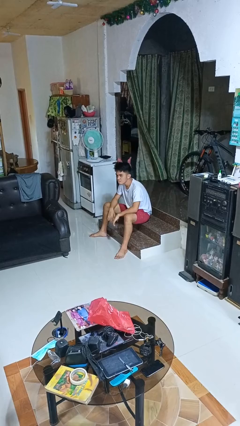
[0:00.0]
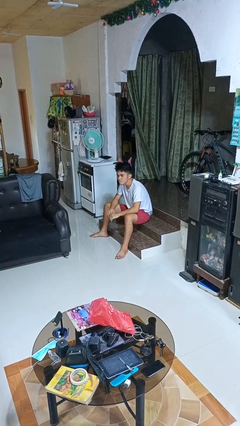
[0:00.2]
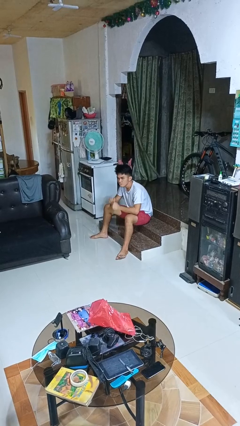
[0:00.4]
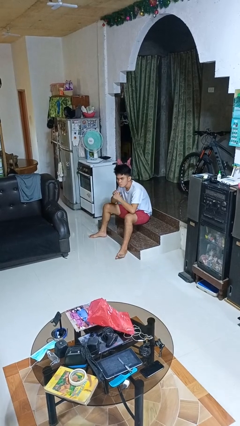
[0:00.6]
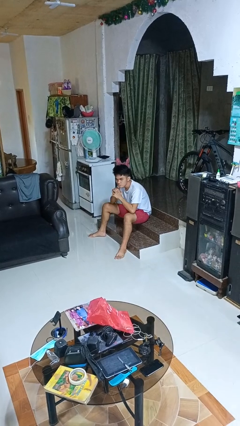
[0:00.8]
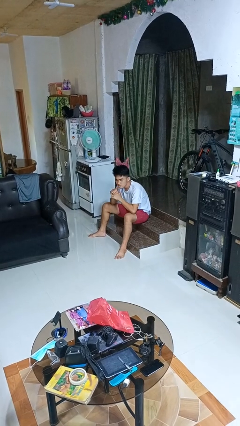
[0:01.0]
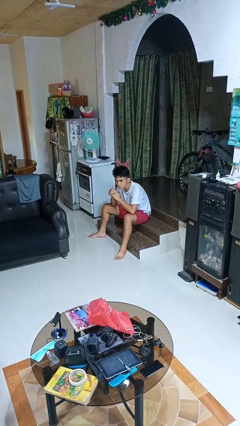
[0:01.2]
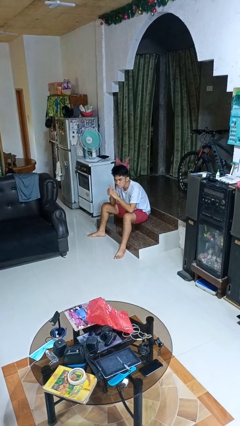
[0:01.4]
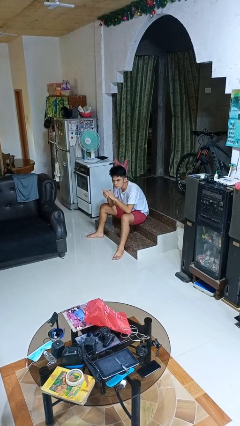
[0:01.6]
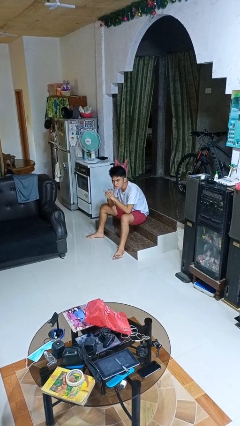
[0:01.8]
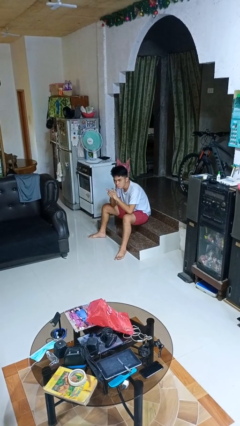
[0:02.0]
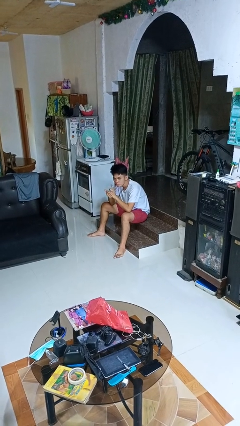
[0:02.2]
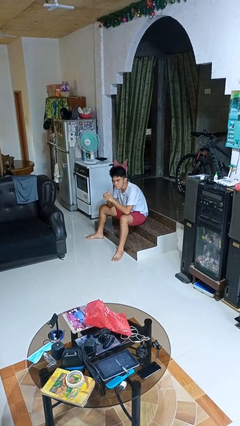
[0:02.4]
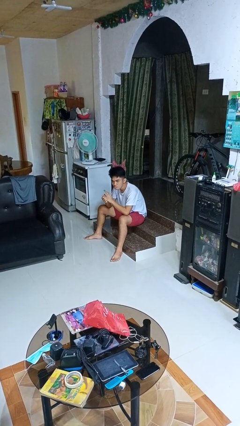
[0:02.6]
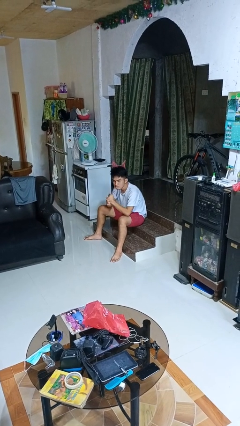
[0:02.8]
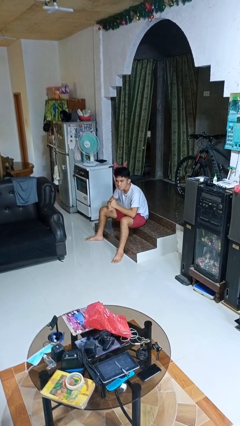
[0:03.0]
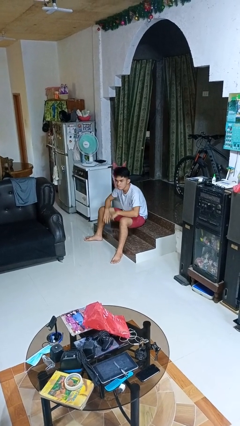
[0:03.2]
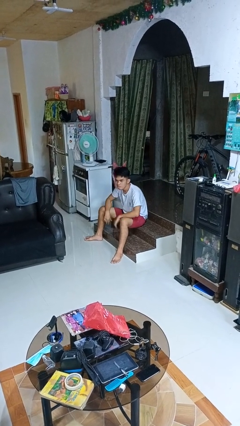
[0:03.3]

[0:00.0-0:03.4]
person cracks knuckles

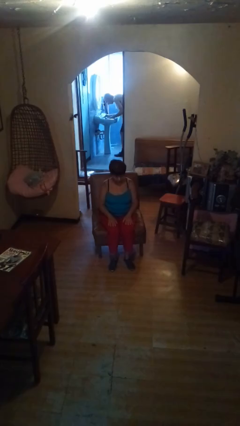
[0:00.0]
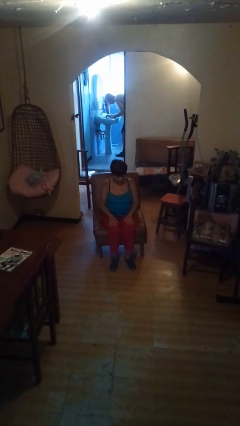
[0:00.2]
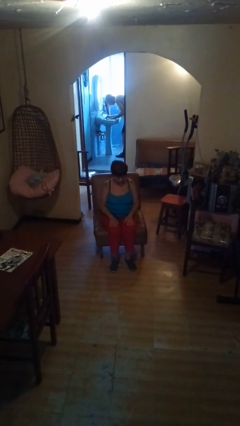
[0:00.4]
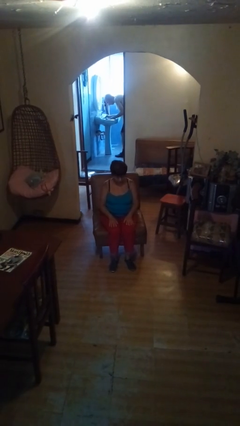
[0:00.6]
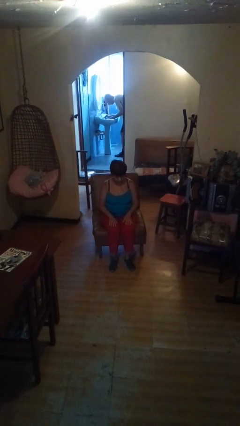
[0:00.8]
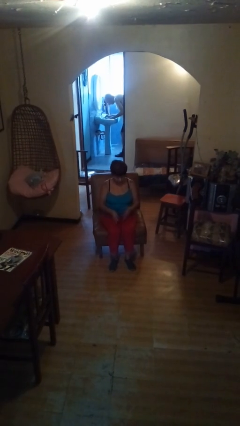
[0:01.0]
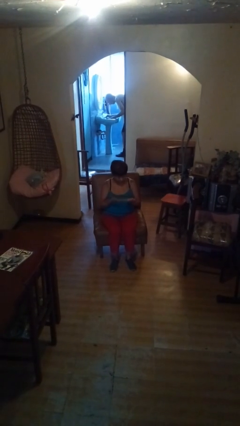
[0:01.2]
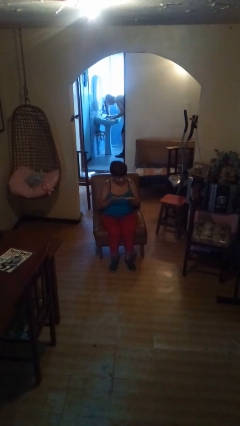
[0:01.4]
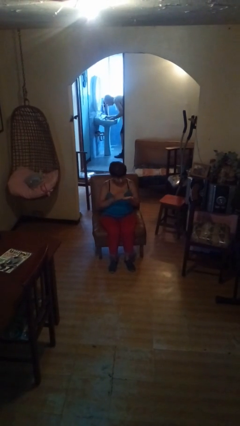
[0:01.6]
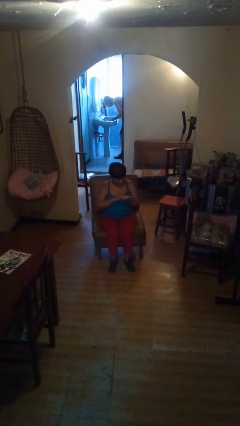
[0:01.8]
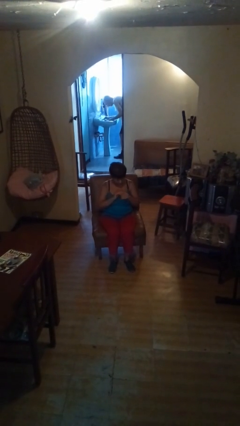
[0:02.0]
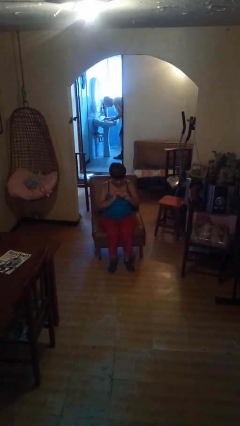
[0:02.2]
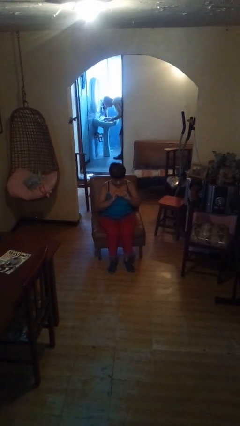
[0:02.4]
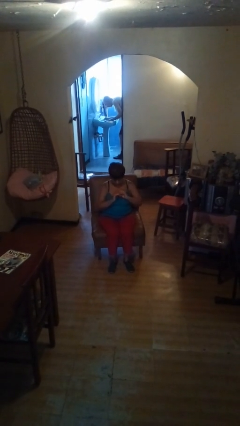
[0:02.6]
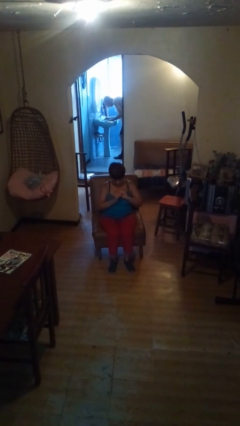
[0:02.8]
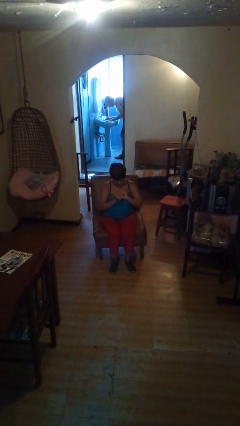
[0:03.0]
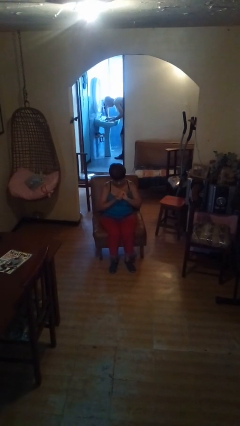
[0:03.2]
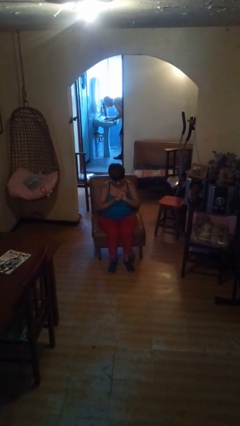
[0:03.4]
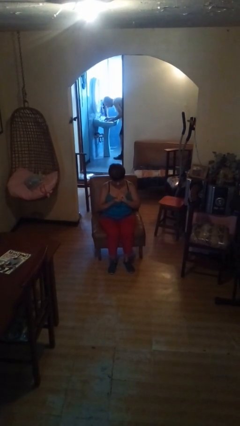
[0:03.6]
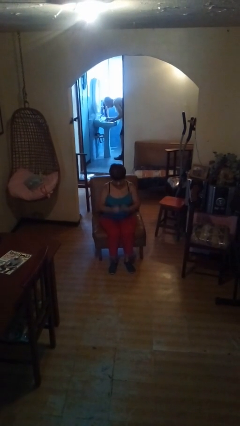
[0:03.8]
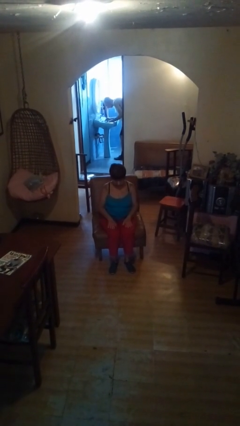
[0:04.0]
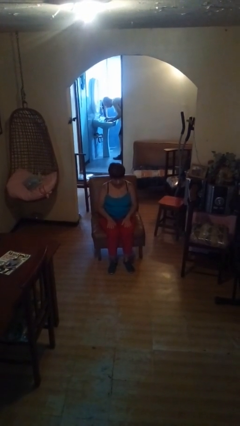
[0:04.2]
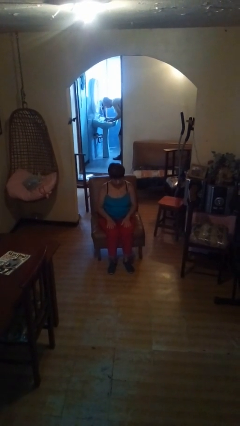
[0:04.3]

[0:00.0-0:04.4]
person looks at hands in lap

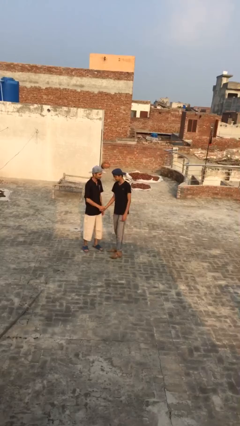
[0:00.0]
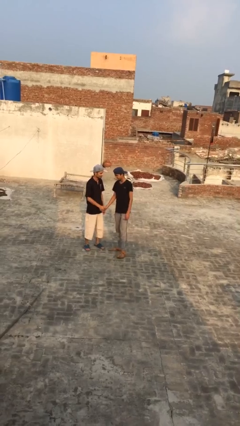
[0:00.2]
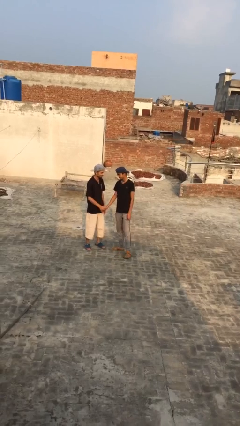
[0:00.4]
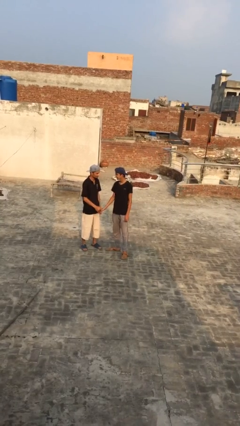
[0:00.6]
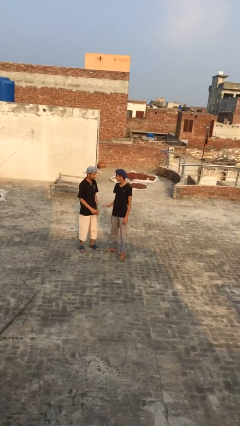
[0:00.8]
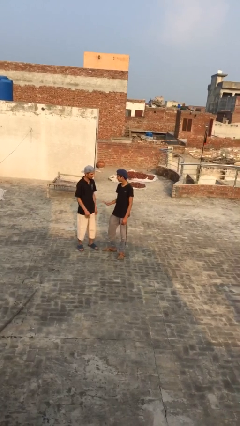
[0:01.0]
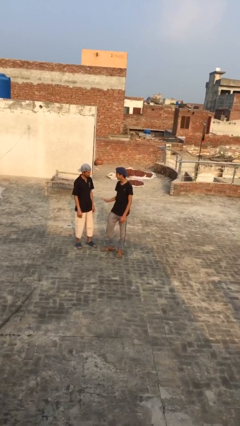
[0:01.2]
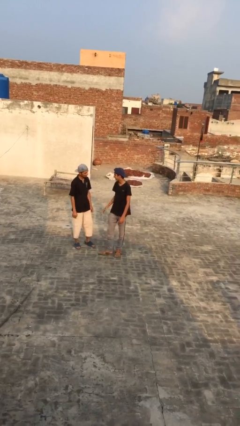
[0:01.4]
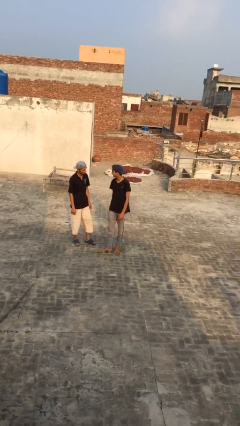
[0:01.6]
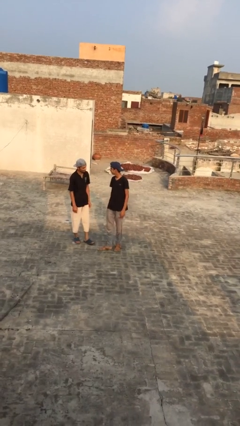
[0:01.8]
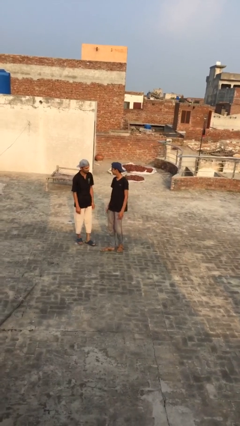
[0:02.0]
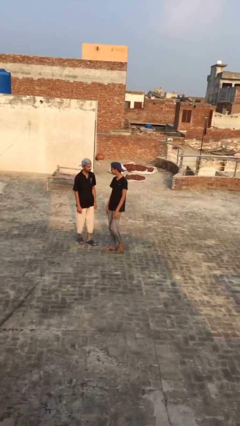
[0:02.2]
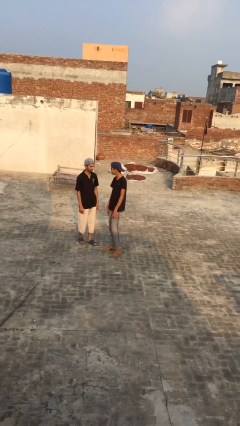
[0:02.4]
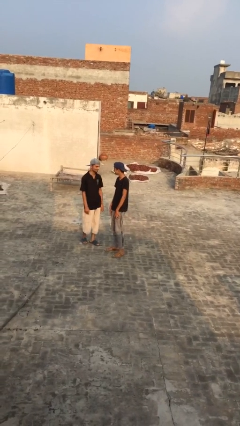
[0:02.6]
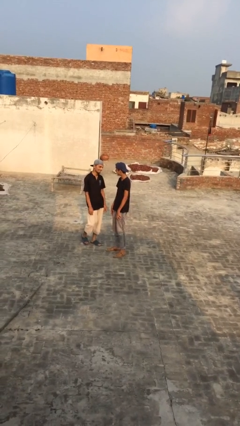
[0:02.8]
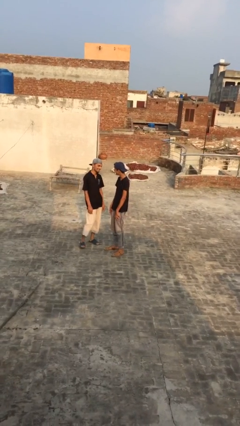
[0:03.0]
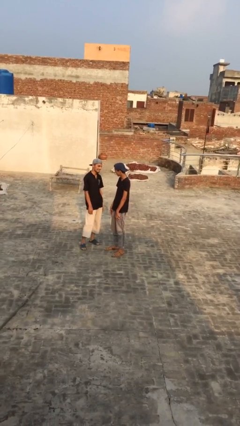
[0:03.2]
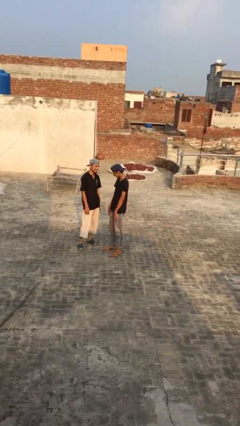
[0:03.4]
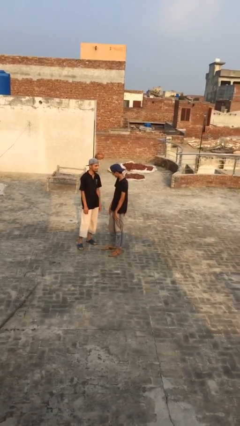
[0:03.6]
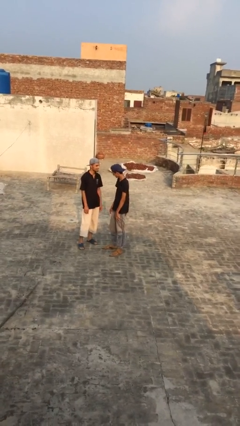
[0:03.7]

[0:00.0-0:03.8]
person talks to person

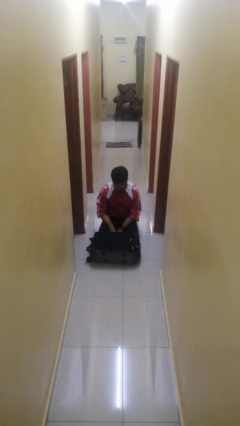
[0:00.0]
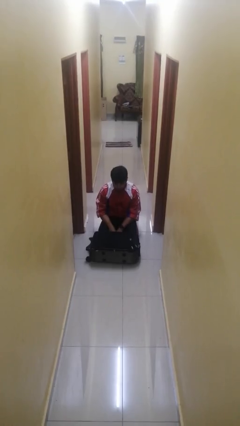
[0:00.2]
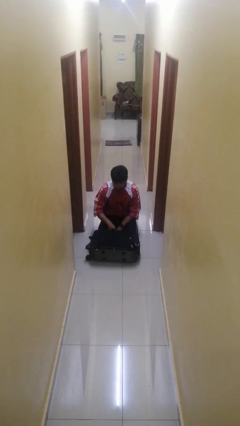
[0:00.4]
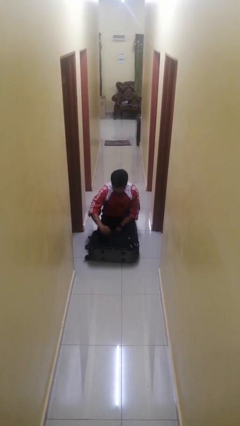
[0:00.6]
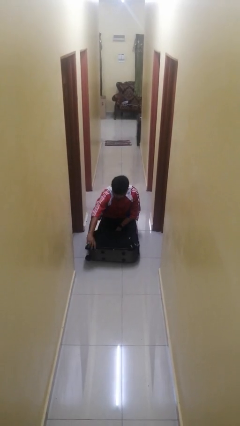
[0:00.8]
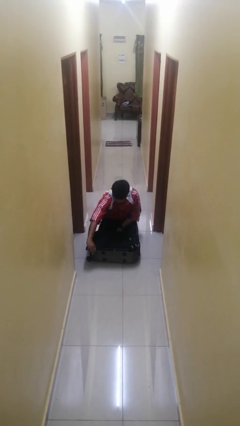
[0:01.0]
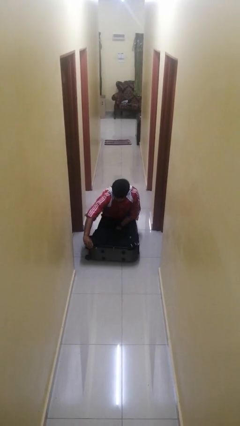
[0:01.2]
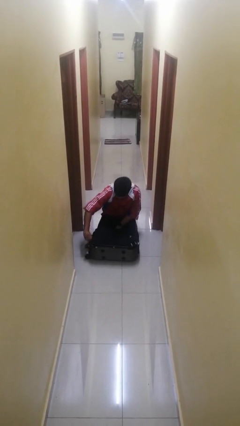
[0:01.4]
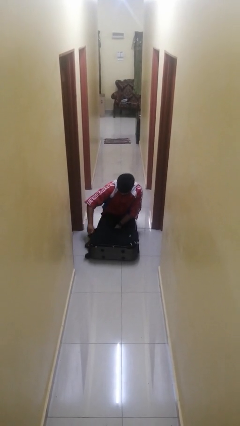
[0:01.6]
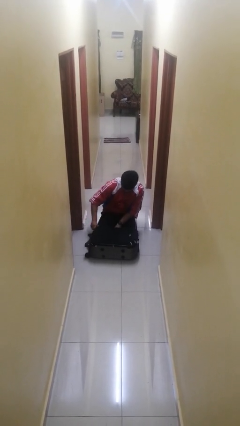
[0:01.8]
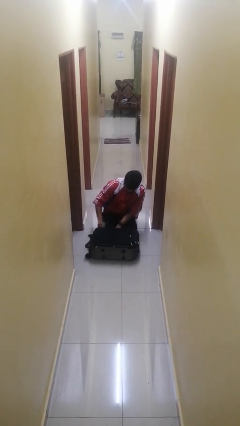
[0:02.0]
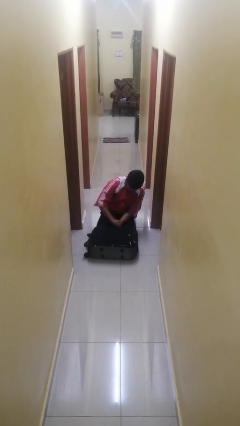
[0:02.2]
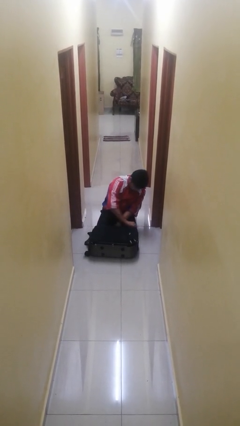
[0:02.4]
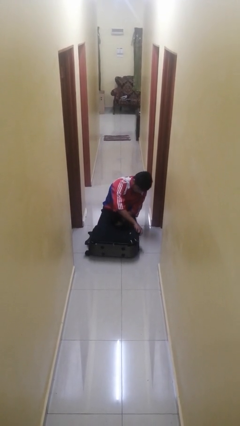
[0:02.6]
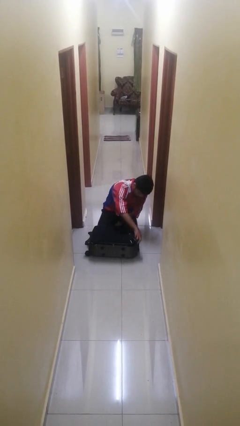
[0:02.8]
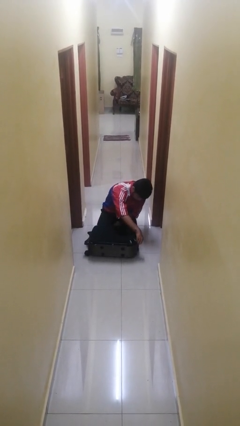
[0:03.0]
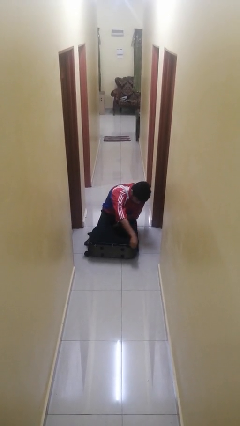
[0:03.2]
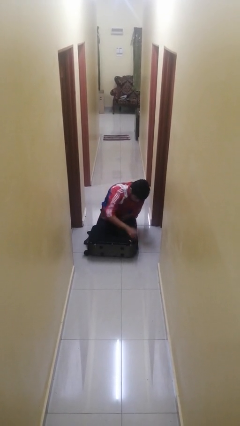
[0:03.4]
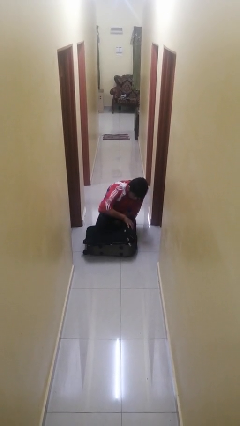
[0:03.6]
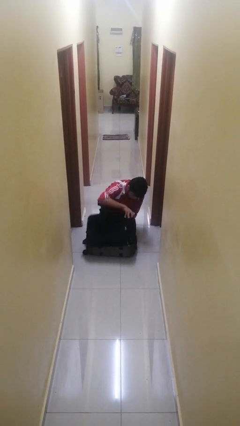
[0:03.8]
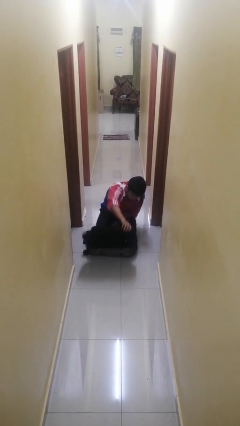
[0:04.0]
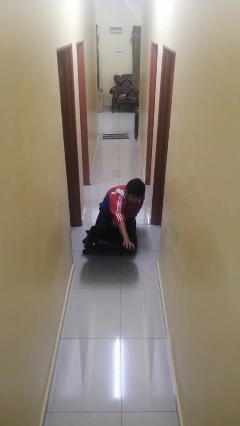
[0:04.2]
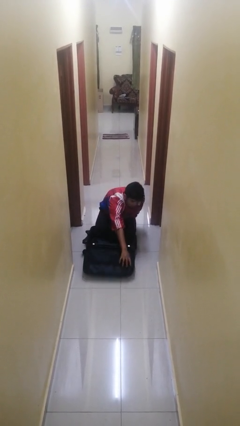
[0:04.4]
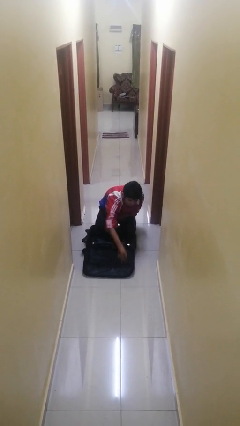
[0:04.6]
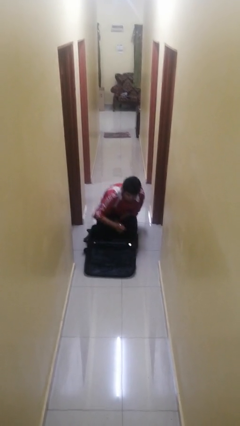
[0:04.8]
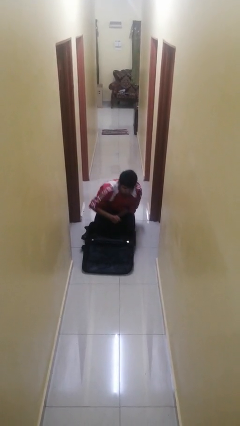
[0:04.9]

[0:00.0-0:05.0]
person opens suitcase

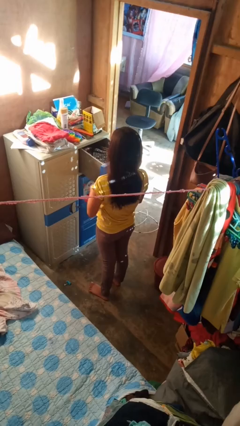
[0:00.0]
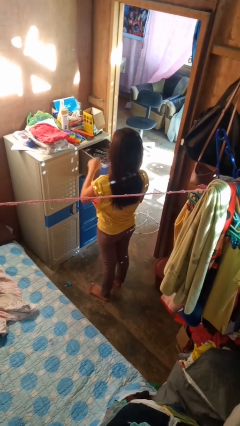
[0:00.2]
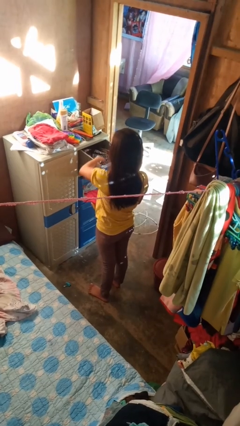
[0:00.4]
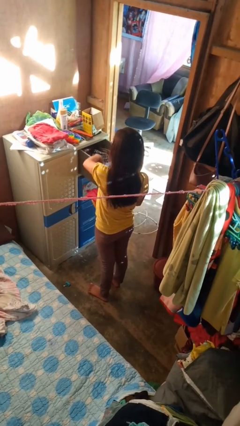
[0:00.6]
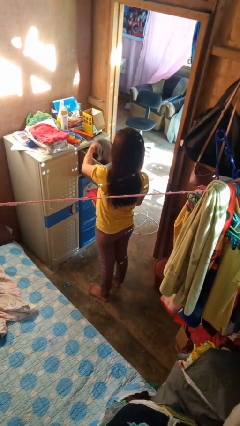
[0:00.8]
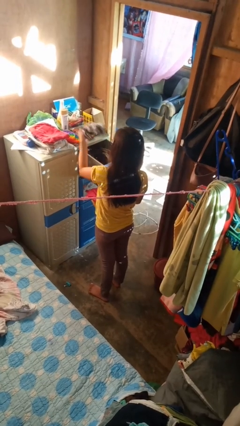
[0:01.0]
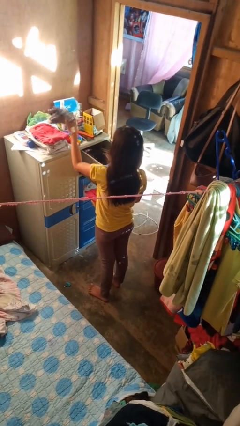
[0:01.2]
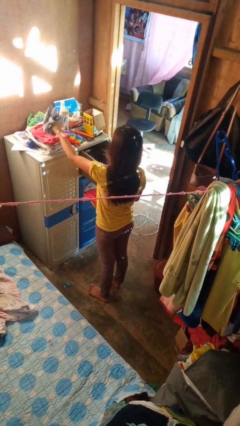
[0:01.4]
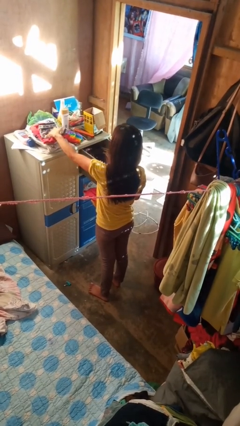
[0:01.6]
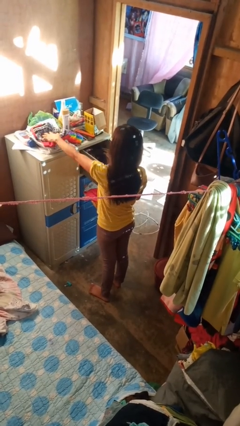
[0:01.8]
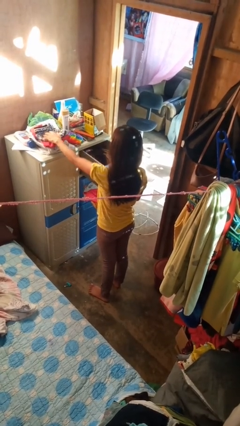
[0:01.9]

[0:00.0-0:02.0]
person takes clothes from dresser
